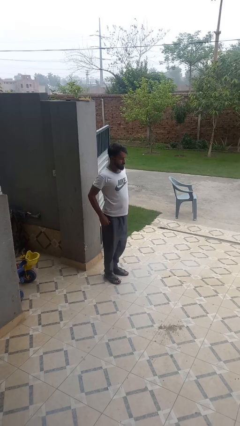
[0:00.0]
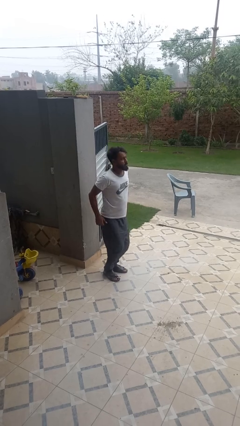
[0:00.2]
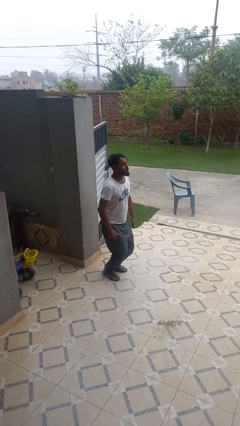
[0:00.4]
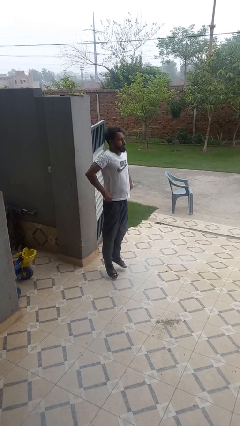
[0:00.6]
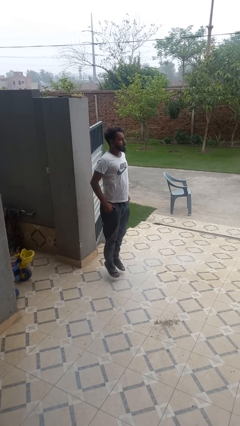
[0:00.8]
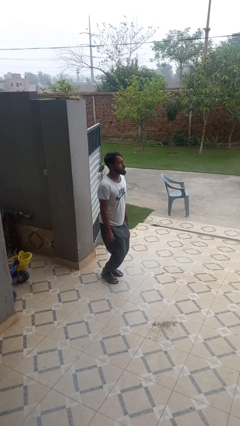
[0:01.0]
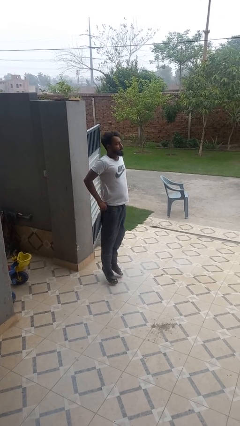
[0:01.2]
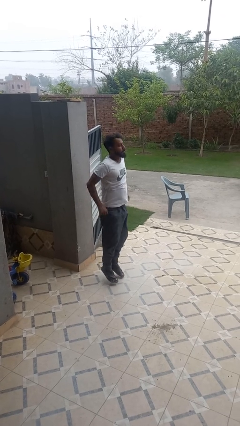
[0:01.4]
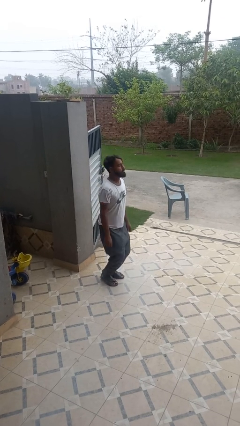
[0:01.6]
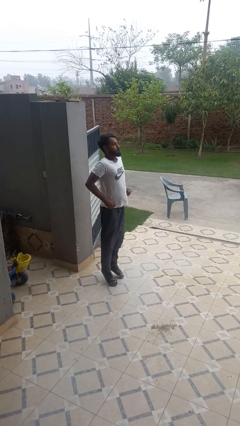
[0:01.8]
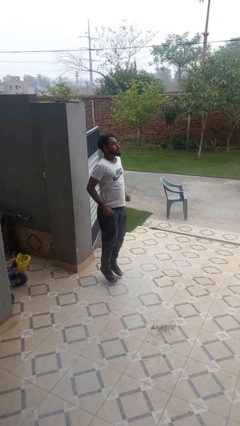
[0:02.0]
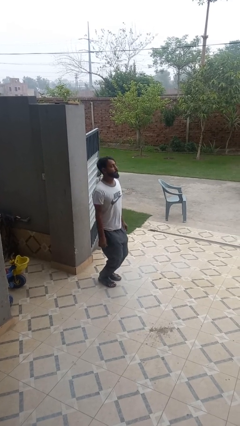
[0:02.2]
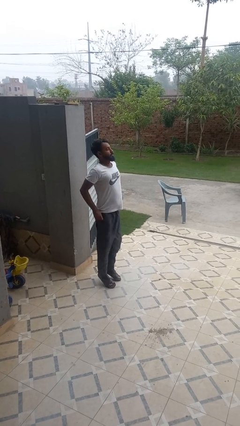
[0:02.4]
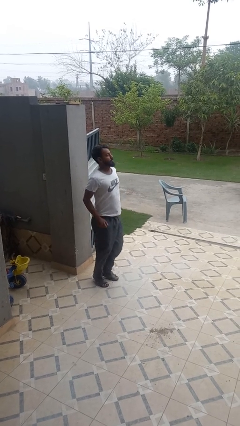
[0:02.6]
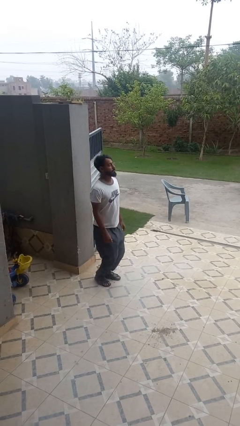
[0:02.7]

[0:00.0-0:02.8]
person jumps

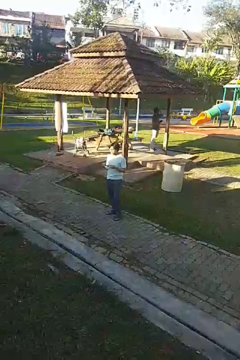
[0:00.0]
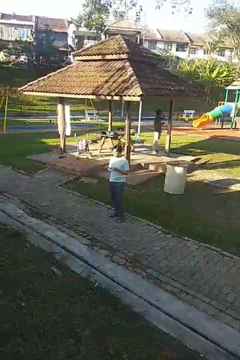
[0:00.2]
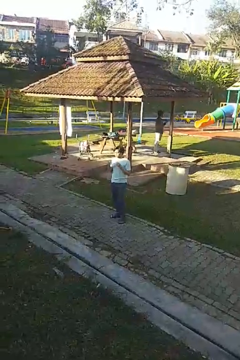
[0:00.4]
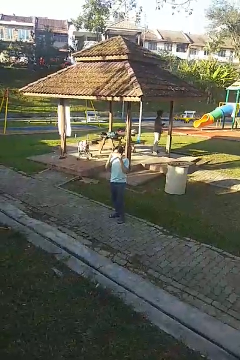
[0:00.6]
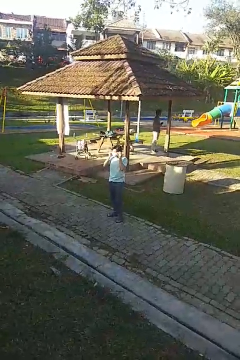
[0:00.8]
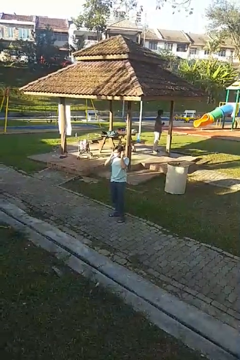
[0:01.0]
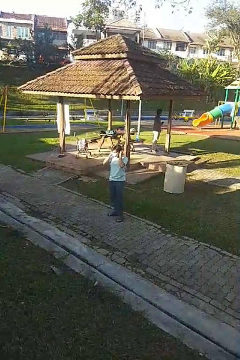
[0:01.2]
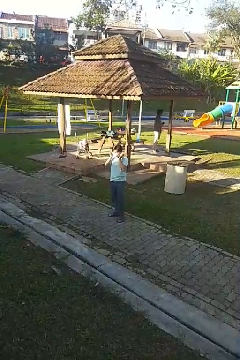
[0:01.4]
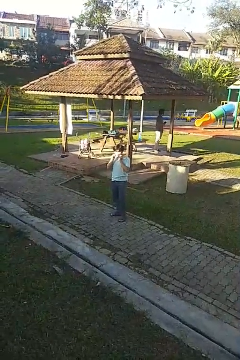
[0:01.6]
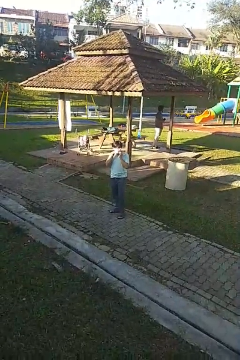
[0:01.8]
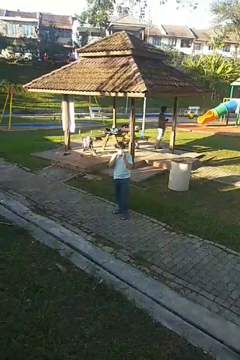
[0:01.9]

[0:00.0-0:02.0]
person puts on facemask

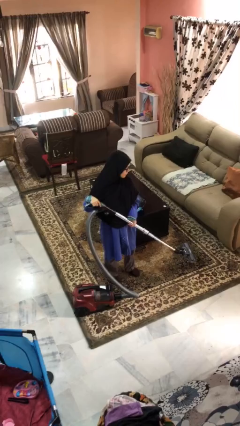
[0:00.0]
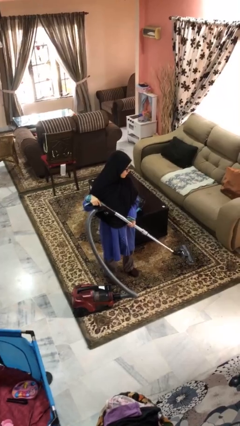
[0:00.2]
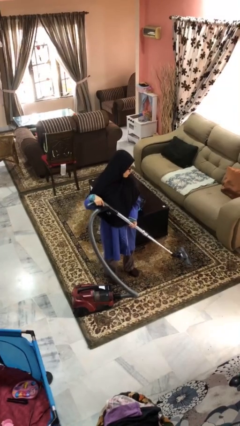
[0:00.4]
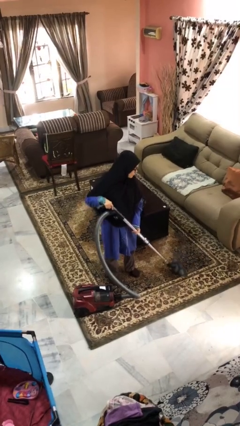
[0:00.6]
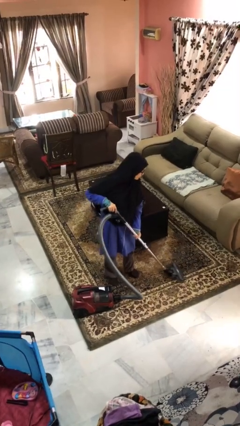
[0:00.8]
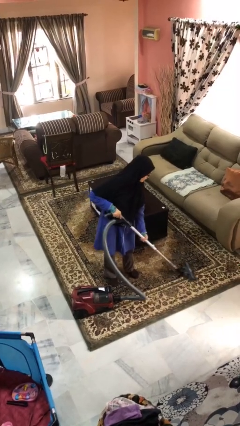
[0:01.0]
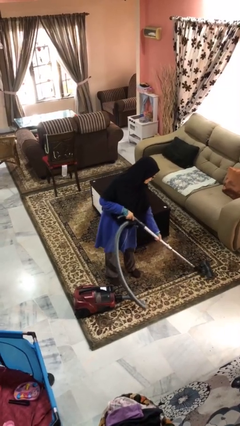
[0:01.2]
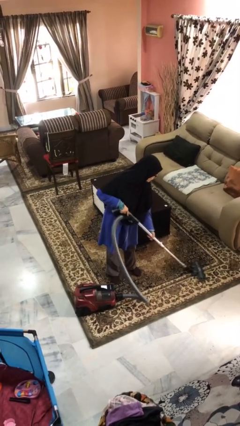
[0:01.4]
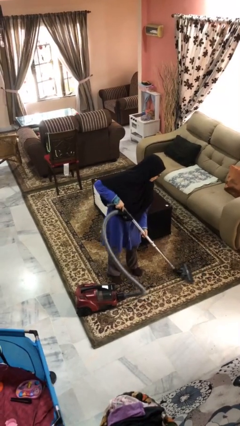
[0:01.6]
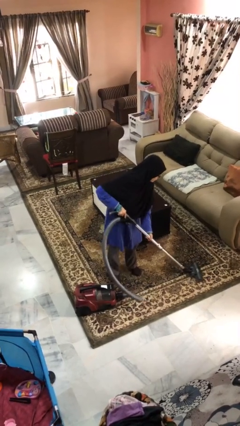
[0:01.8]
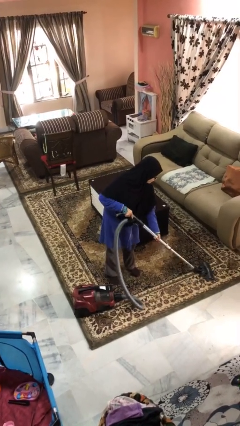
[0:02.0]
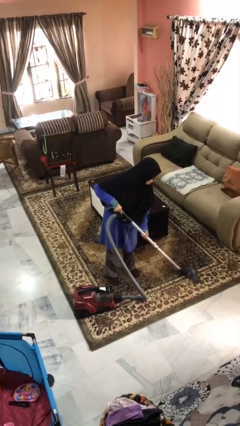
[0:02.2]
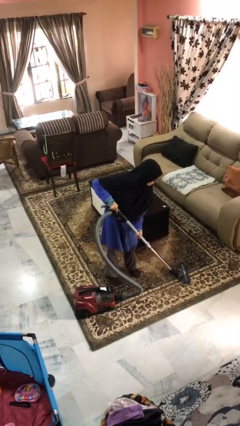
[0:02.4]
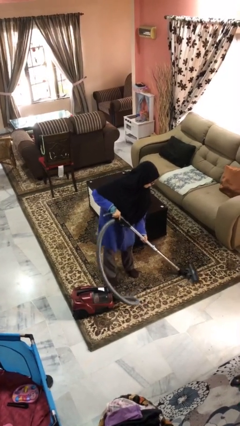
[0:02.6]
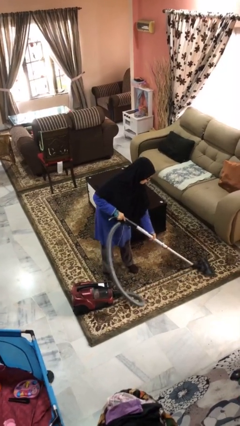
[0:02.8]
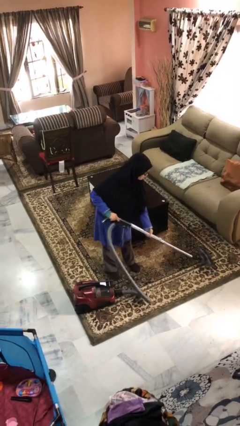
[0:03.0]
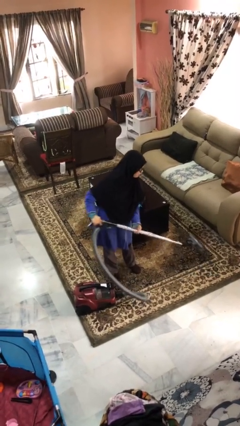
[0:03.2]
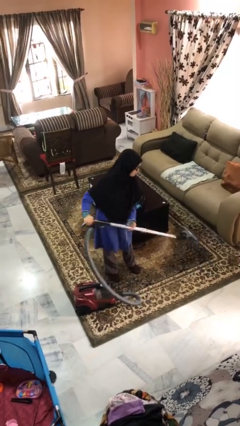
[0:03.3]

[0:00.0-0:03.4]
person vacuums carpet

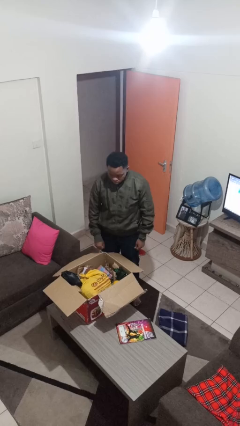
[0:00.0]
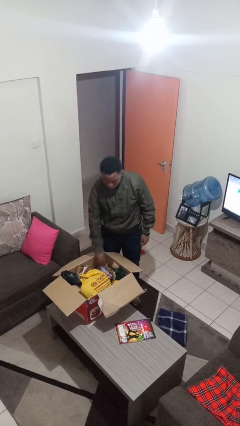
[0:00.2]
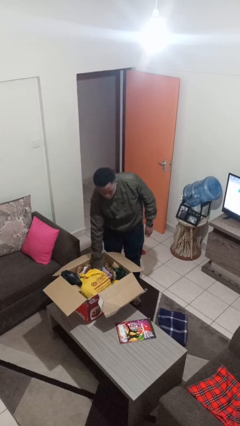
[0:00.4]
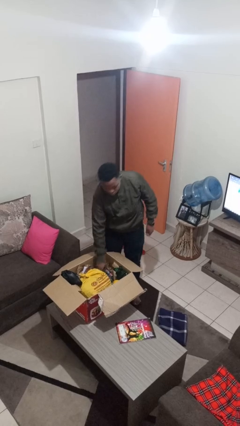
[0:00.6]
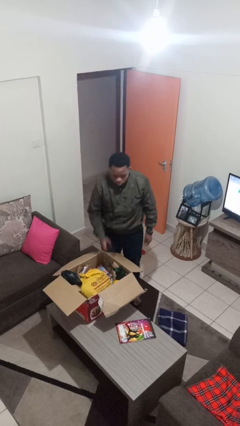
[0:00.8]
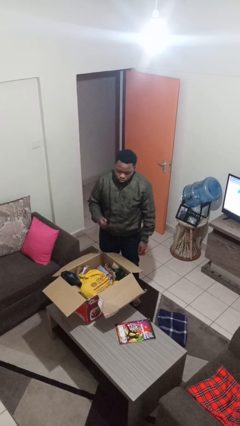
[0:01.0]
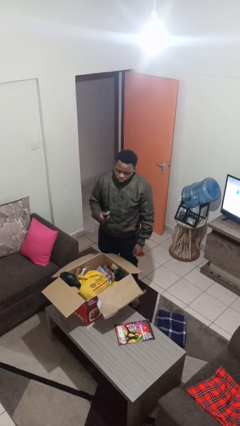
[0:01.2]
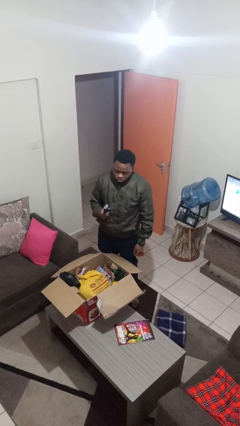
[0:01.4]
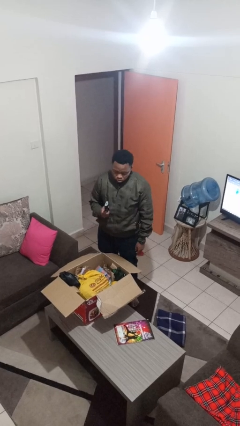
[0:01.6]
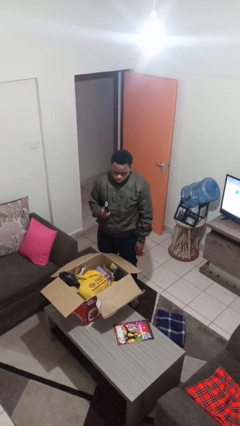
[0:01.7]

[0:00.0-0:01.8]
person takes object from box

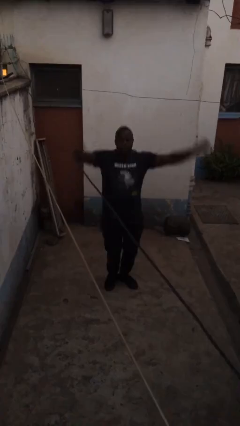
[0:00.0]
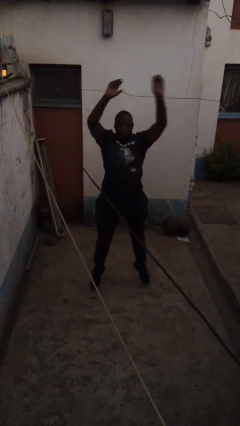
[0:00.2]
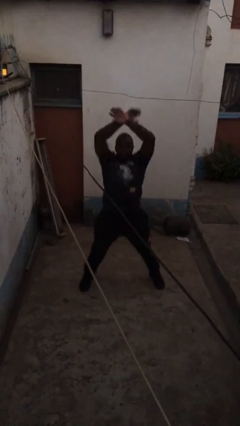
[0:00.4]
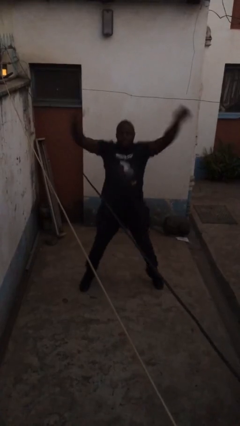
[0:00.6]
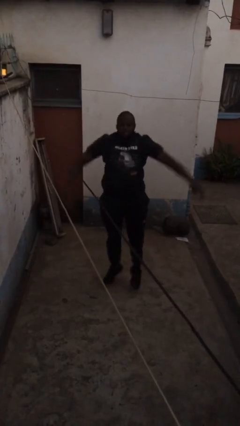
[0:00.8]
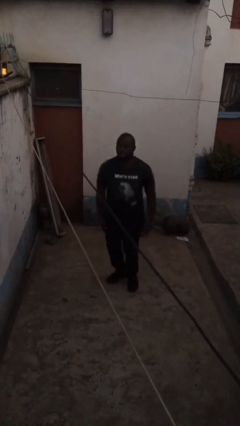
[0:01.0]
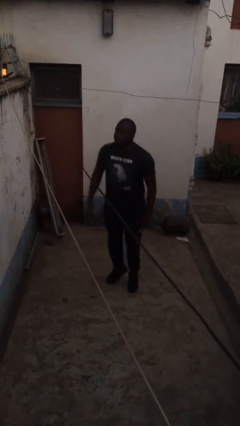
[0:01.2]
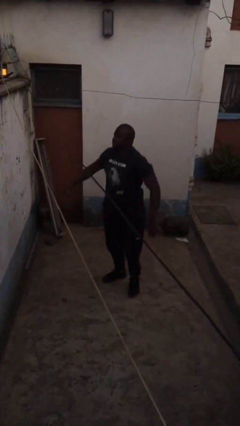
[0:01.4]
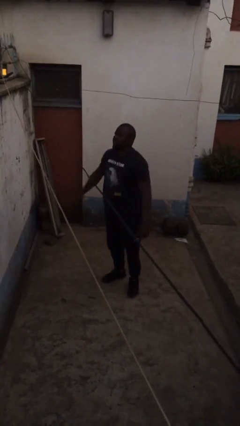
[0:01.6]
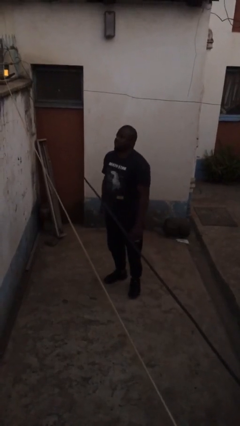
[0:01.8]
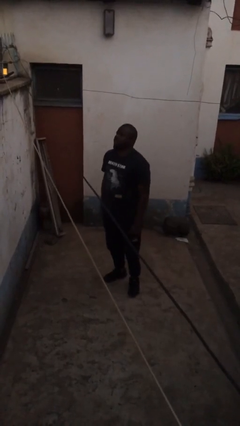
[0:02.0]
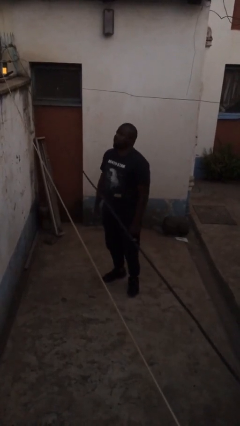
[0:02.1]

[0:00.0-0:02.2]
person exercises with jumping jacks

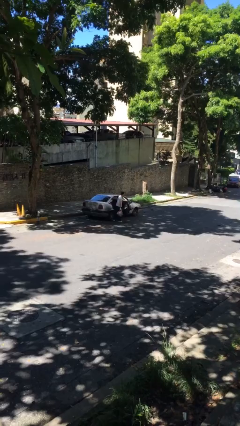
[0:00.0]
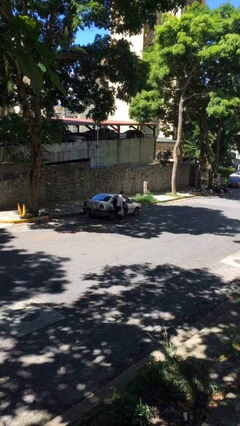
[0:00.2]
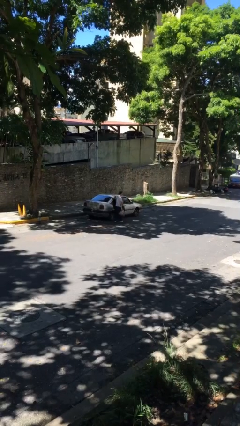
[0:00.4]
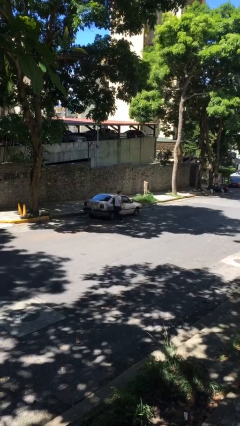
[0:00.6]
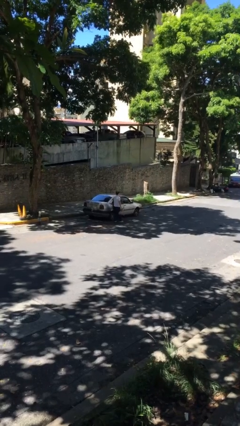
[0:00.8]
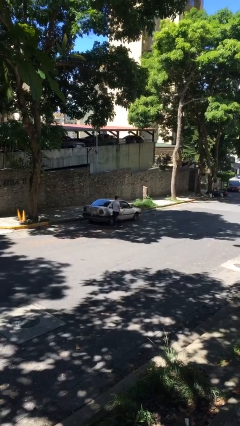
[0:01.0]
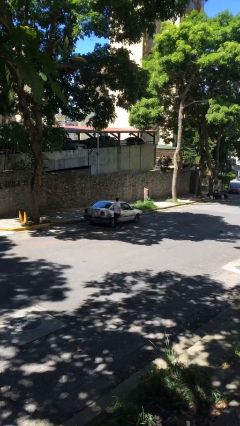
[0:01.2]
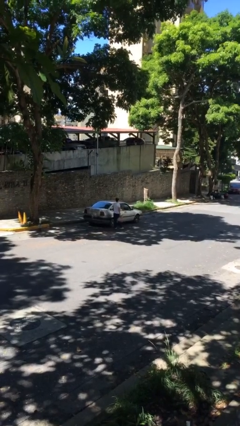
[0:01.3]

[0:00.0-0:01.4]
person closes car door

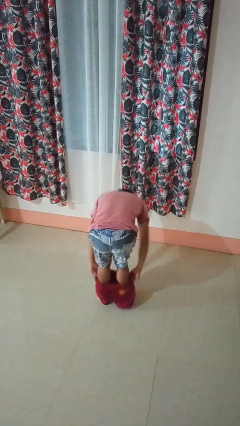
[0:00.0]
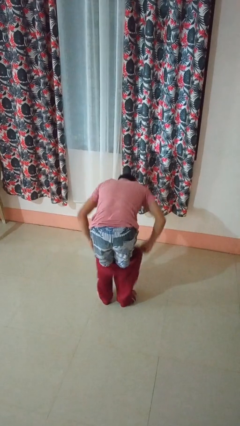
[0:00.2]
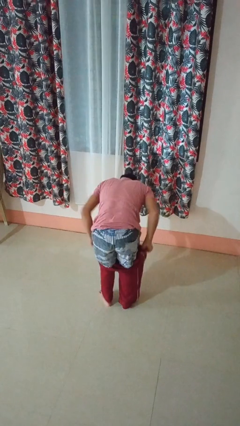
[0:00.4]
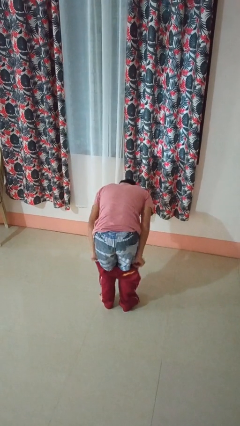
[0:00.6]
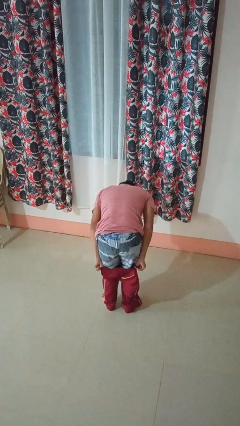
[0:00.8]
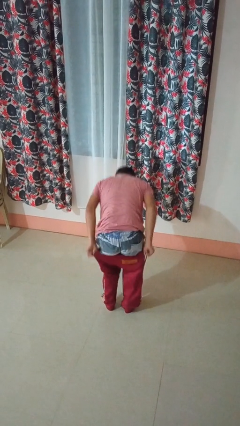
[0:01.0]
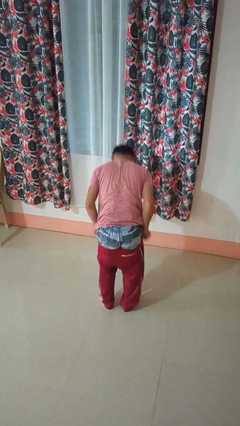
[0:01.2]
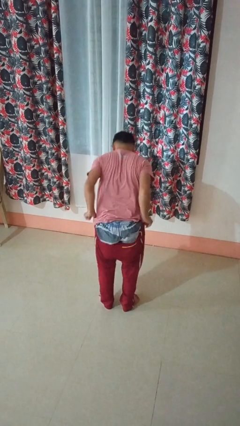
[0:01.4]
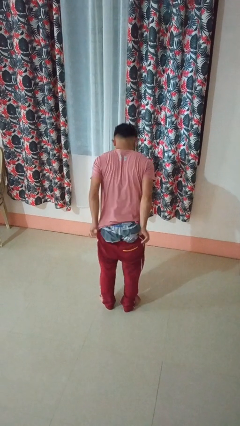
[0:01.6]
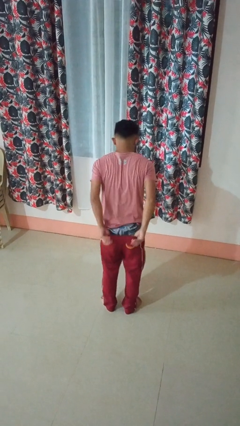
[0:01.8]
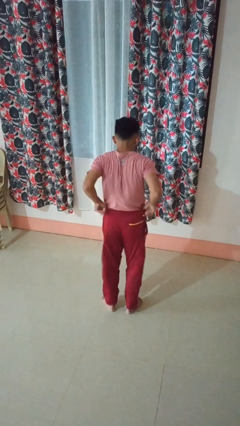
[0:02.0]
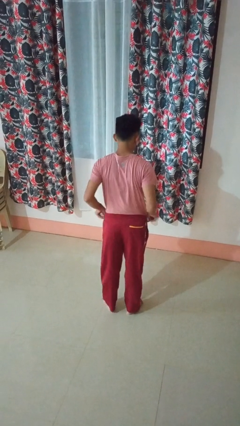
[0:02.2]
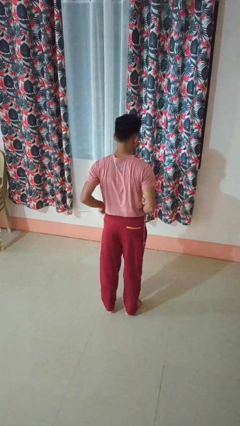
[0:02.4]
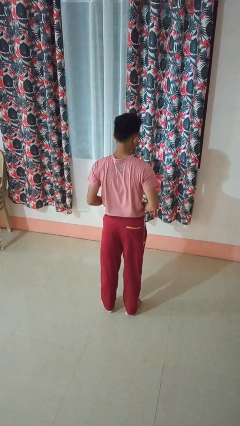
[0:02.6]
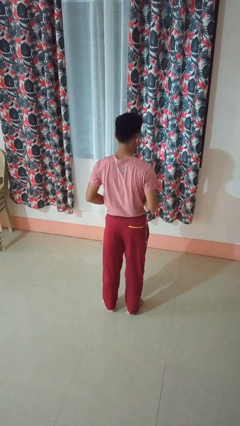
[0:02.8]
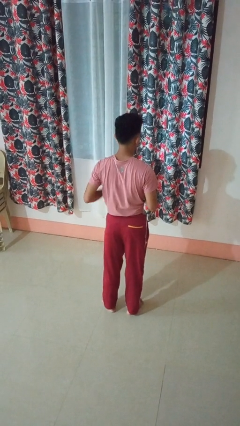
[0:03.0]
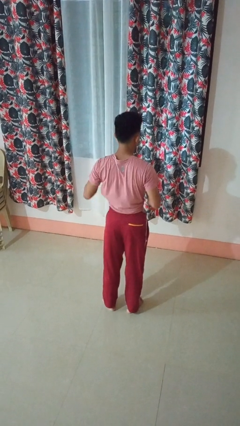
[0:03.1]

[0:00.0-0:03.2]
person puts on pants

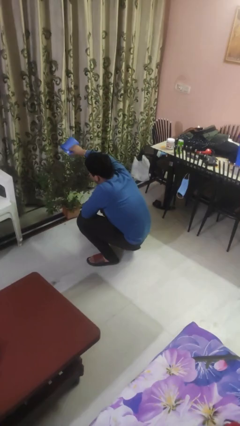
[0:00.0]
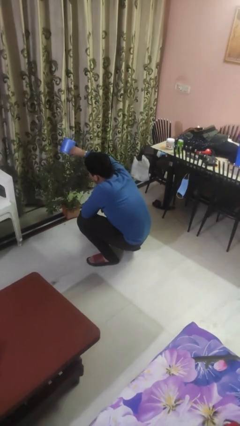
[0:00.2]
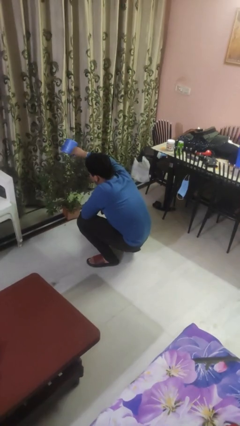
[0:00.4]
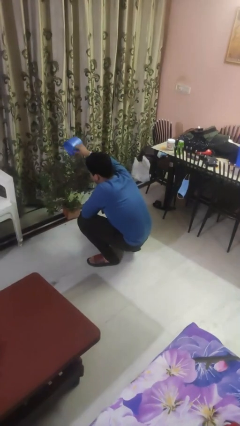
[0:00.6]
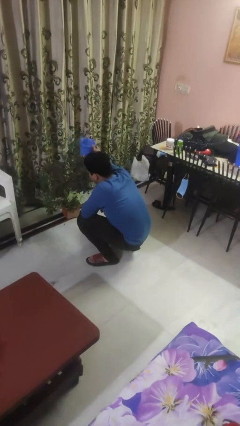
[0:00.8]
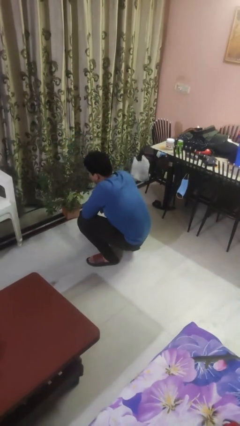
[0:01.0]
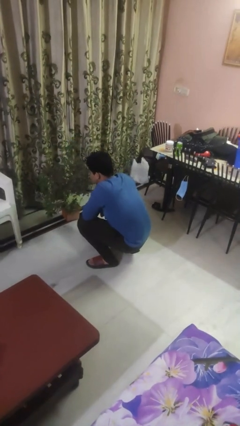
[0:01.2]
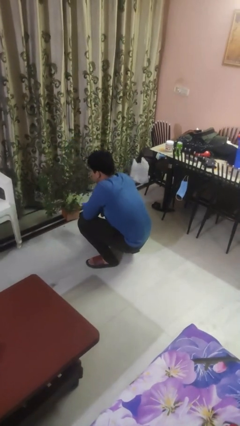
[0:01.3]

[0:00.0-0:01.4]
person waters houseplant
